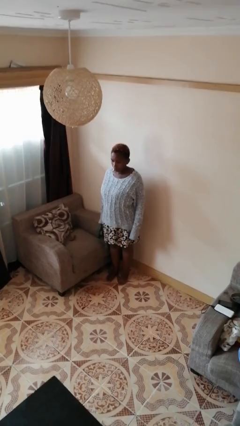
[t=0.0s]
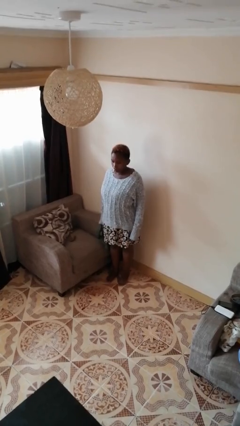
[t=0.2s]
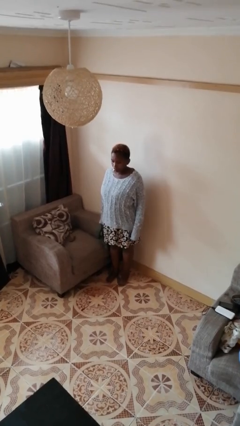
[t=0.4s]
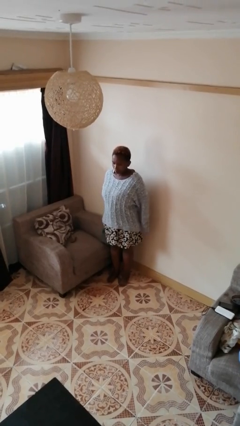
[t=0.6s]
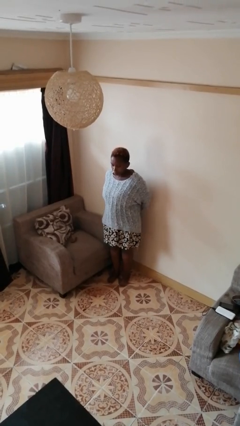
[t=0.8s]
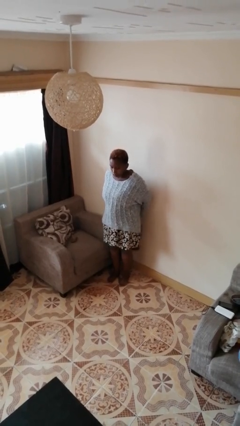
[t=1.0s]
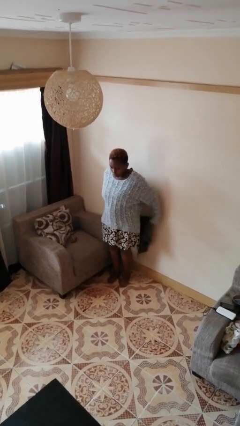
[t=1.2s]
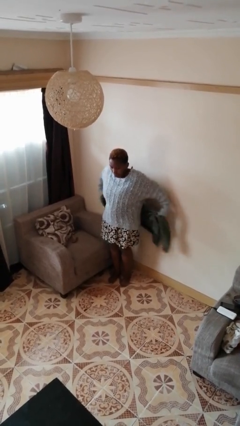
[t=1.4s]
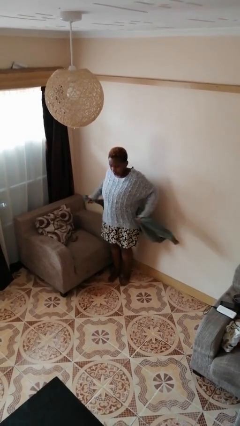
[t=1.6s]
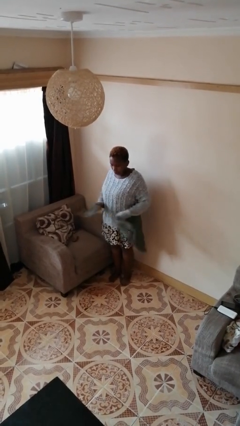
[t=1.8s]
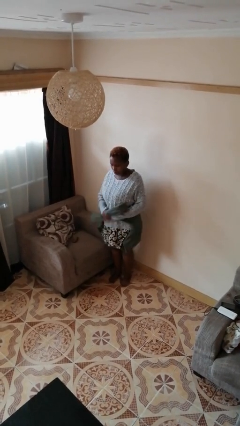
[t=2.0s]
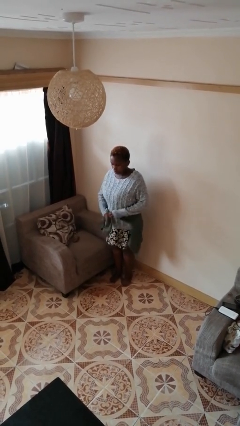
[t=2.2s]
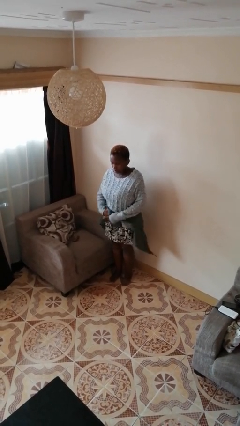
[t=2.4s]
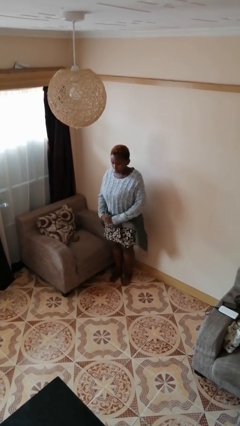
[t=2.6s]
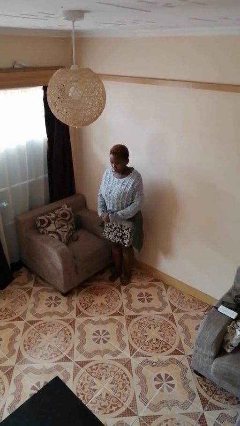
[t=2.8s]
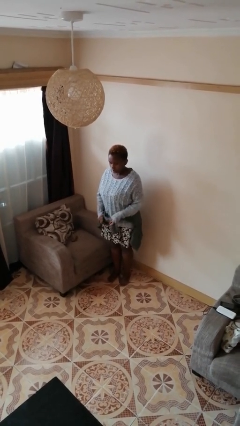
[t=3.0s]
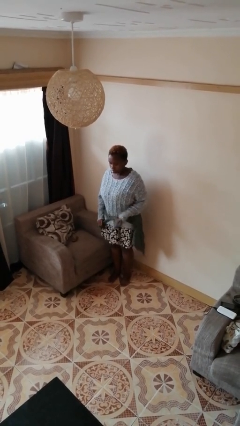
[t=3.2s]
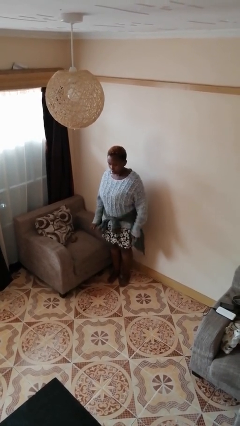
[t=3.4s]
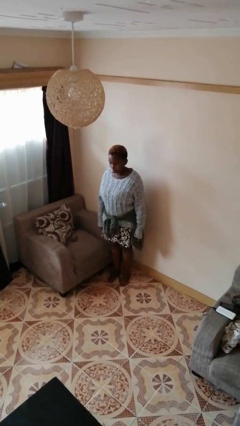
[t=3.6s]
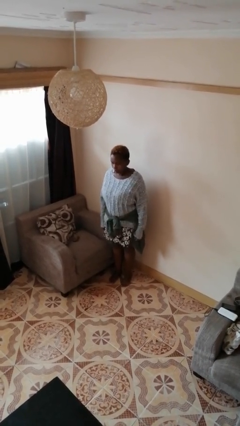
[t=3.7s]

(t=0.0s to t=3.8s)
person ties jacket around waist

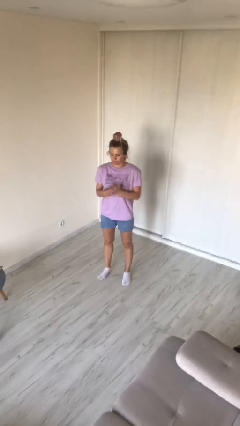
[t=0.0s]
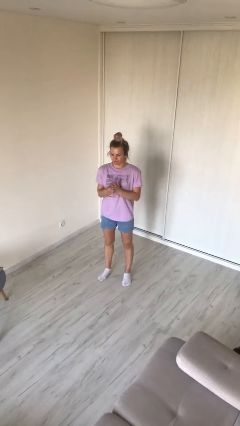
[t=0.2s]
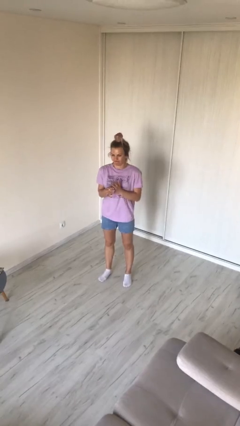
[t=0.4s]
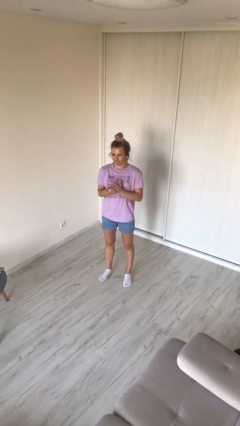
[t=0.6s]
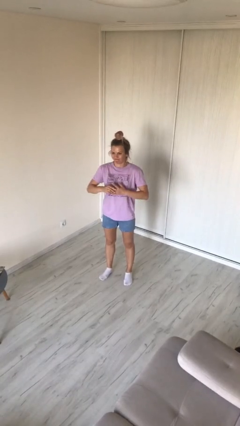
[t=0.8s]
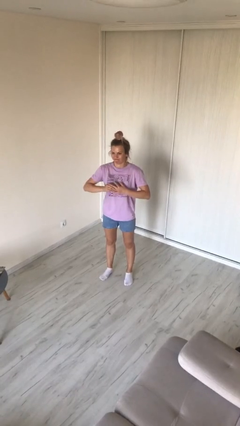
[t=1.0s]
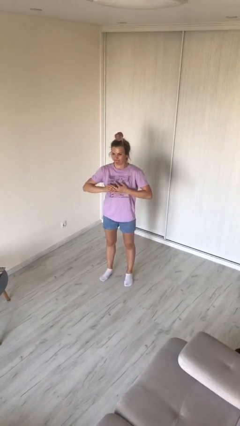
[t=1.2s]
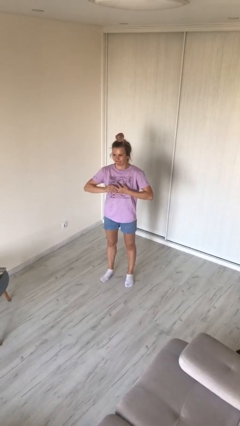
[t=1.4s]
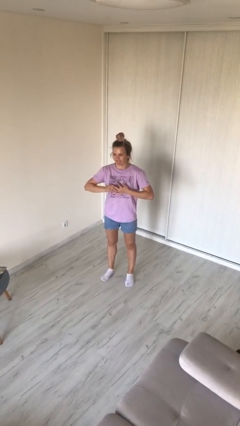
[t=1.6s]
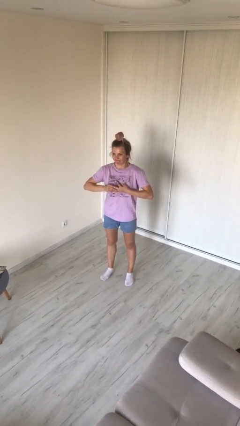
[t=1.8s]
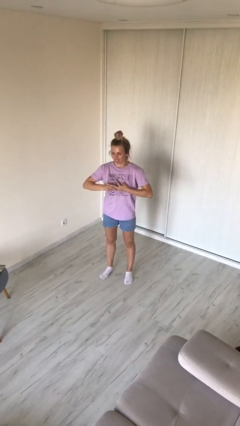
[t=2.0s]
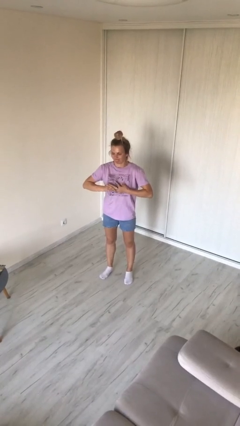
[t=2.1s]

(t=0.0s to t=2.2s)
person cracks knuckles

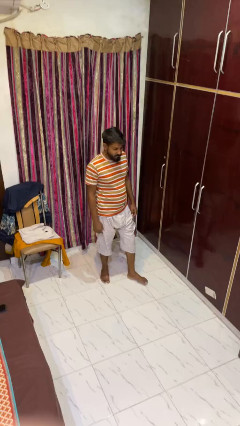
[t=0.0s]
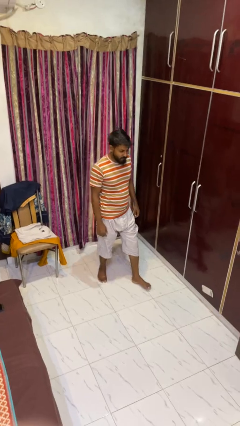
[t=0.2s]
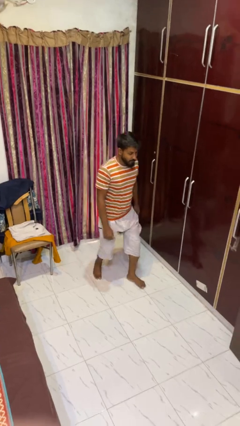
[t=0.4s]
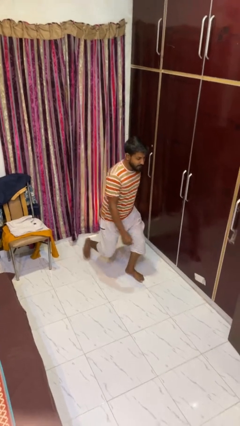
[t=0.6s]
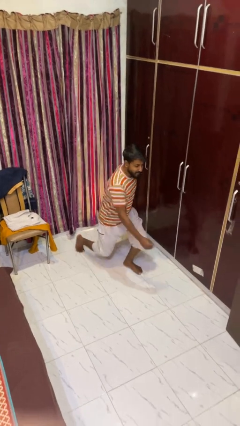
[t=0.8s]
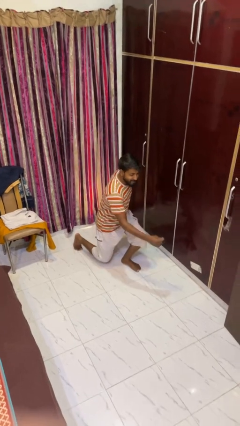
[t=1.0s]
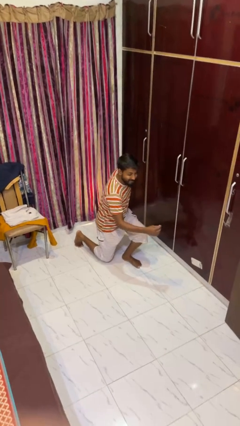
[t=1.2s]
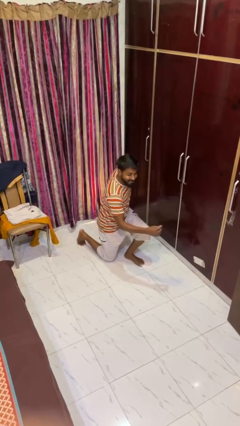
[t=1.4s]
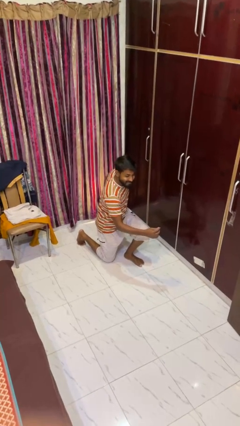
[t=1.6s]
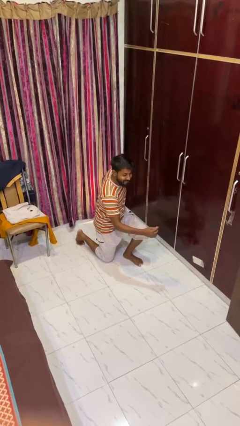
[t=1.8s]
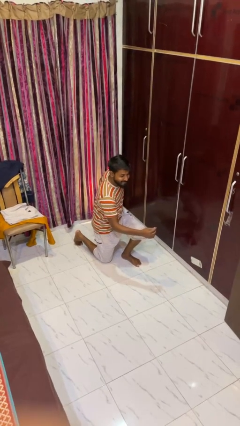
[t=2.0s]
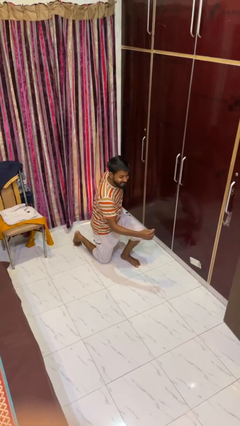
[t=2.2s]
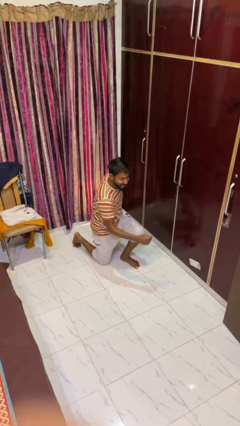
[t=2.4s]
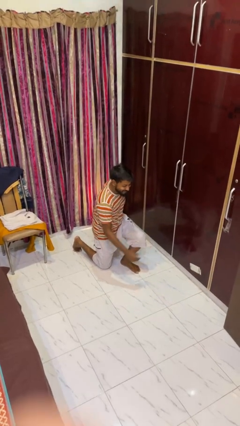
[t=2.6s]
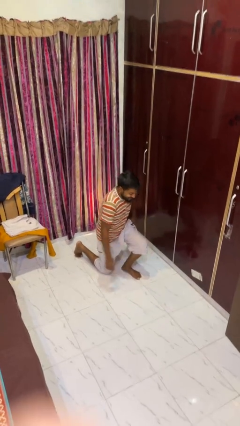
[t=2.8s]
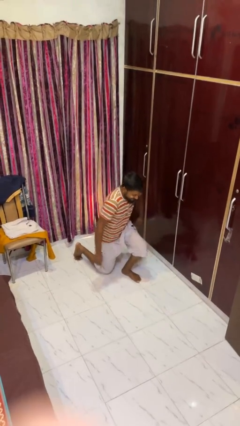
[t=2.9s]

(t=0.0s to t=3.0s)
person kneels

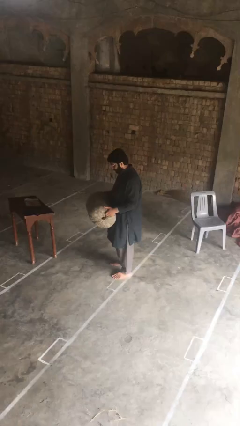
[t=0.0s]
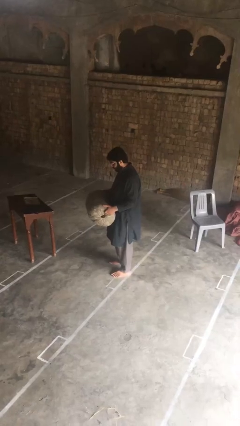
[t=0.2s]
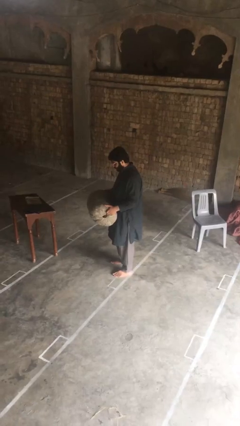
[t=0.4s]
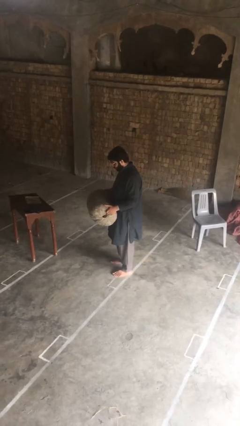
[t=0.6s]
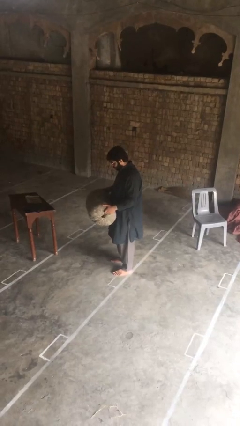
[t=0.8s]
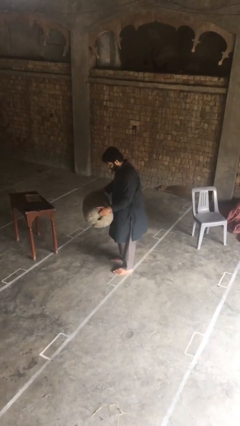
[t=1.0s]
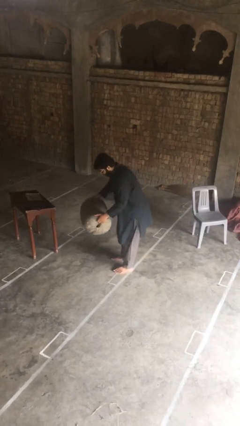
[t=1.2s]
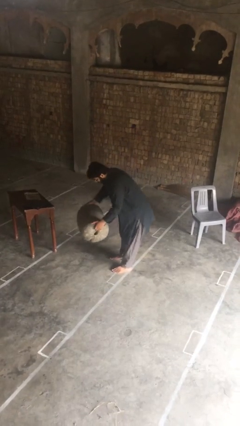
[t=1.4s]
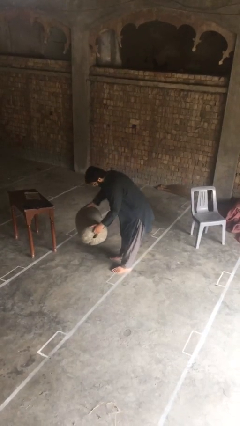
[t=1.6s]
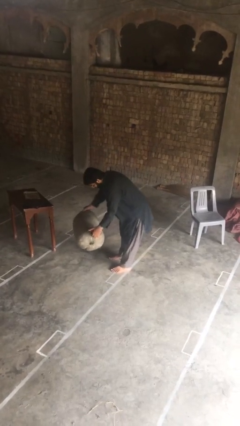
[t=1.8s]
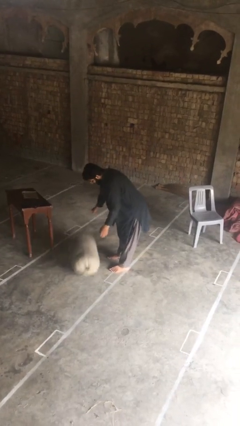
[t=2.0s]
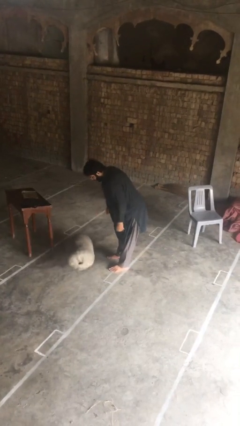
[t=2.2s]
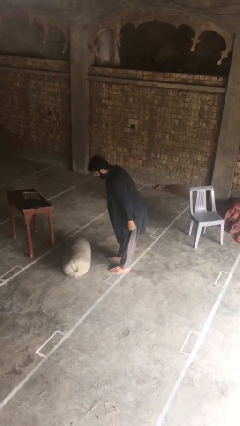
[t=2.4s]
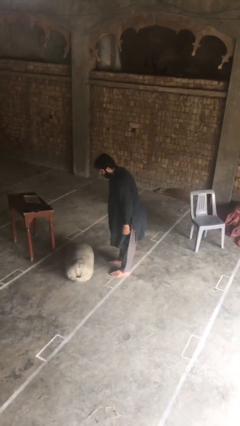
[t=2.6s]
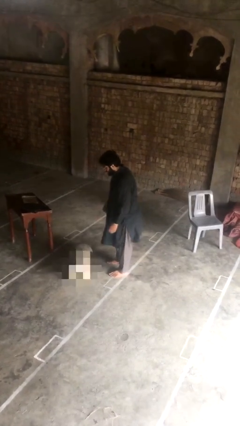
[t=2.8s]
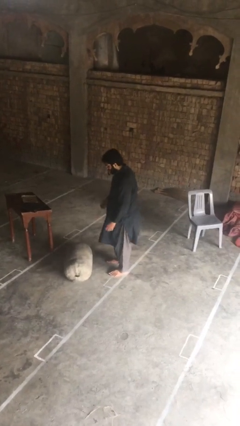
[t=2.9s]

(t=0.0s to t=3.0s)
person puts down object on floor

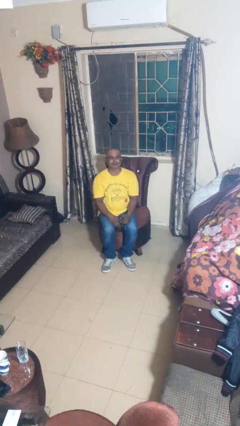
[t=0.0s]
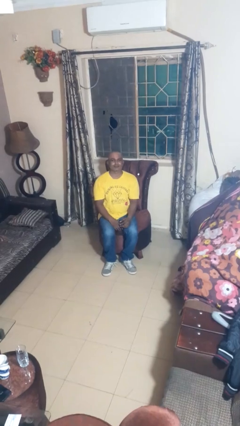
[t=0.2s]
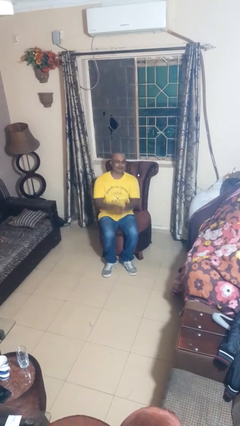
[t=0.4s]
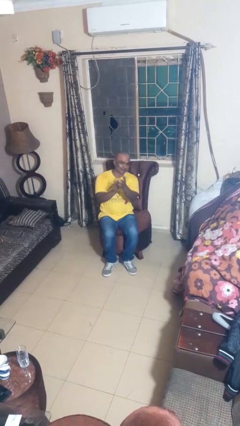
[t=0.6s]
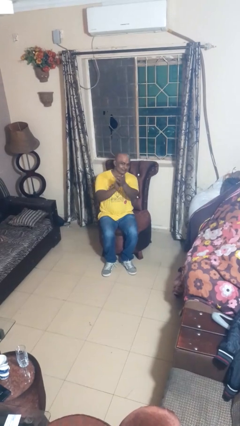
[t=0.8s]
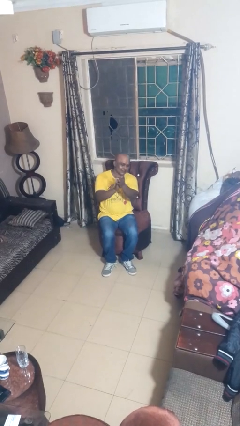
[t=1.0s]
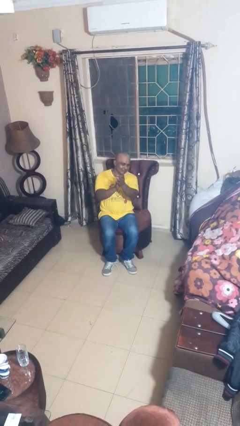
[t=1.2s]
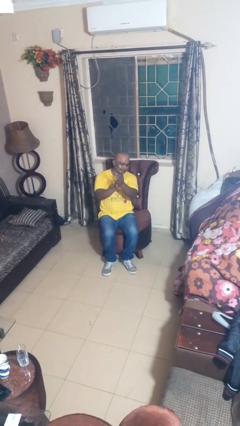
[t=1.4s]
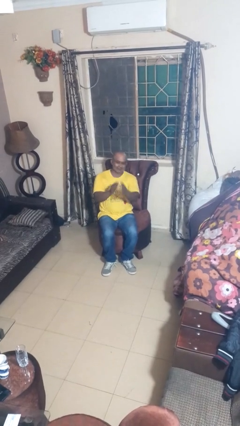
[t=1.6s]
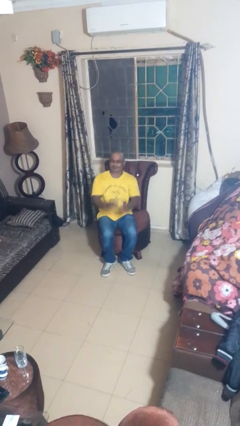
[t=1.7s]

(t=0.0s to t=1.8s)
person claps hands

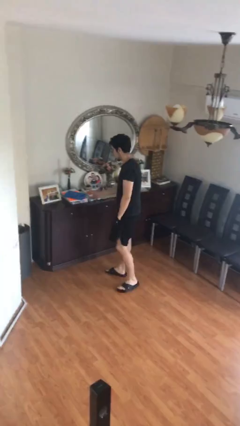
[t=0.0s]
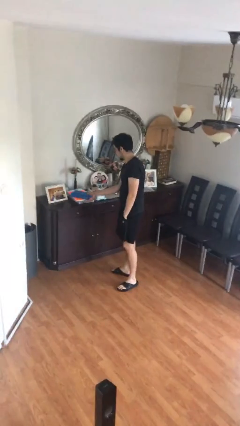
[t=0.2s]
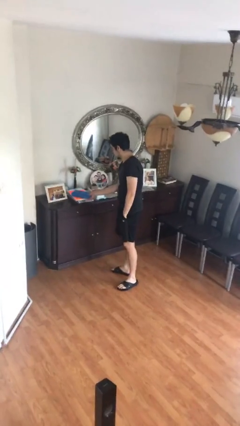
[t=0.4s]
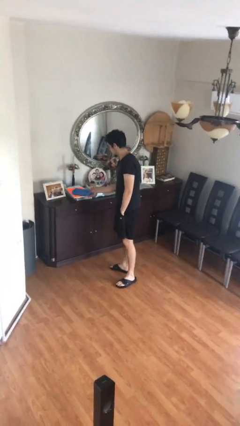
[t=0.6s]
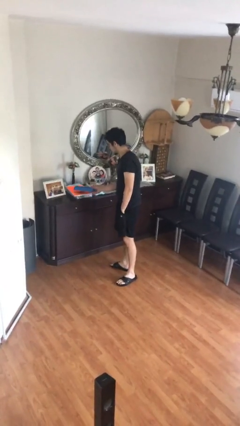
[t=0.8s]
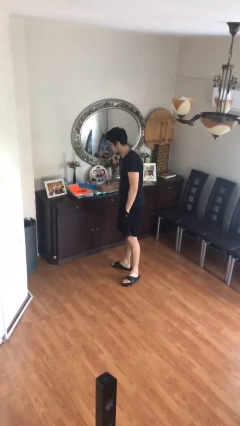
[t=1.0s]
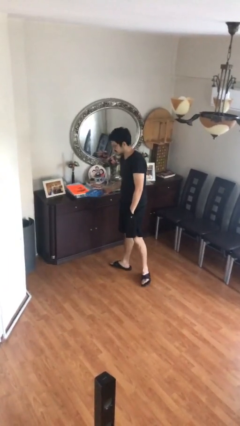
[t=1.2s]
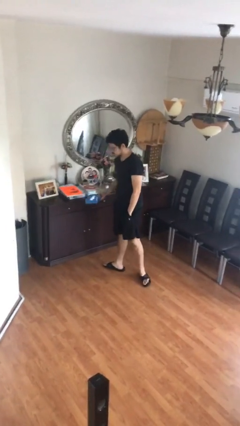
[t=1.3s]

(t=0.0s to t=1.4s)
person picks up object from table

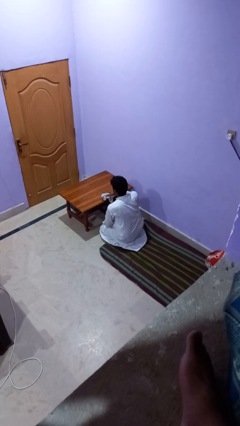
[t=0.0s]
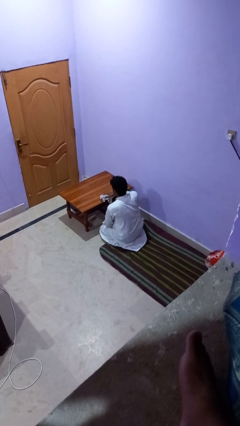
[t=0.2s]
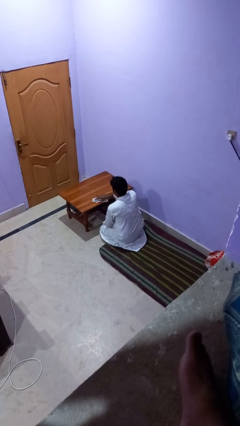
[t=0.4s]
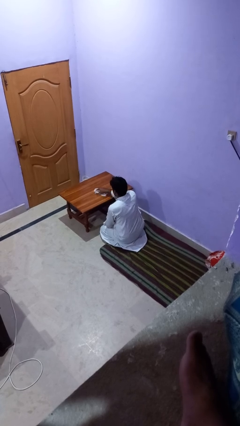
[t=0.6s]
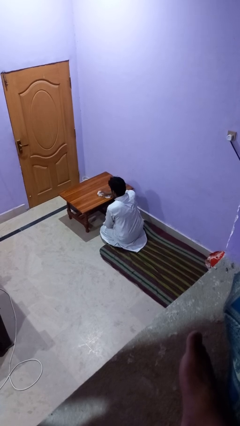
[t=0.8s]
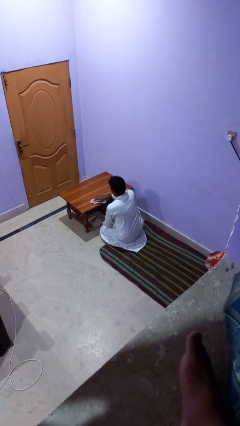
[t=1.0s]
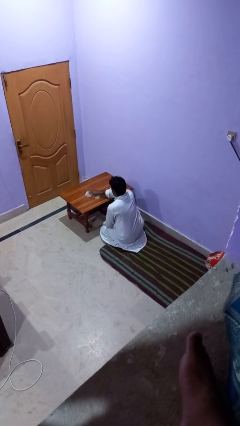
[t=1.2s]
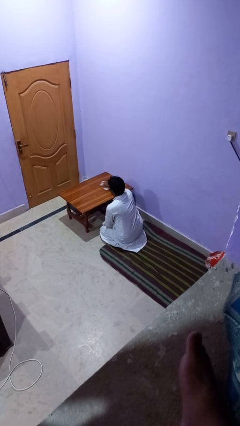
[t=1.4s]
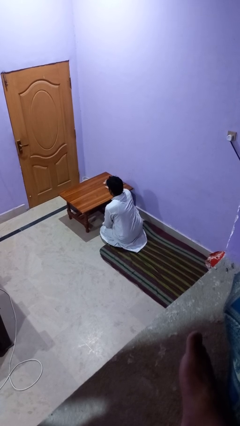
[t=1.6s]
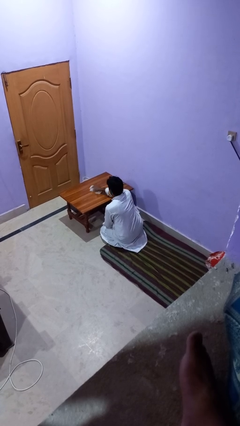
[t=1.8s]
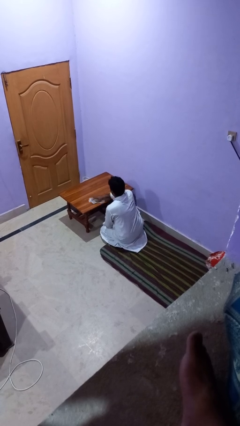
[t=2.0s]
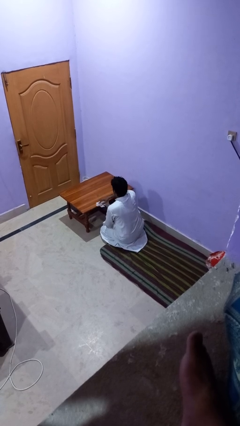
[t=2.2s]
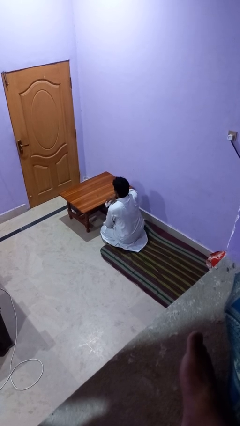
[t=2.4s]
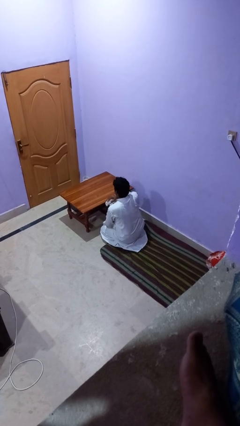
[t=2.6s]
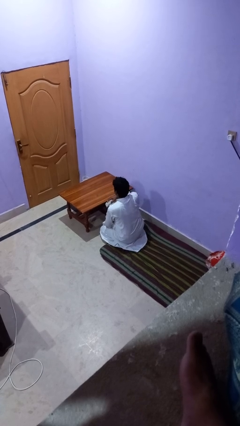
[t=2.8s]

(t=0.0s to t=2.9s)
person cleans table with rag
